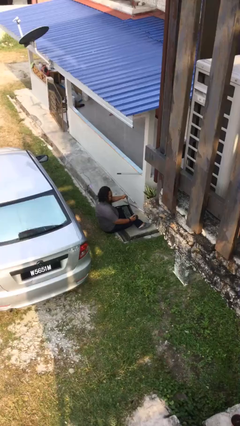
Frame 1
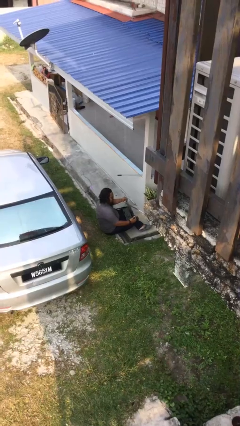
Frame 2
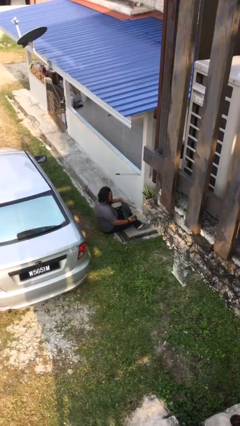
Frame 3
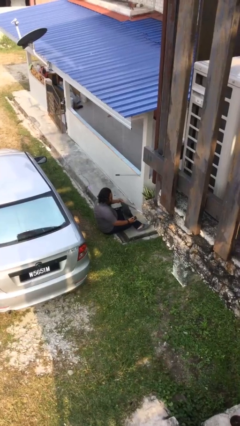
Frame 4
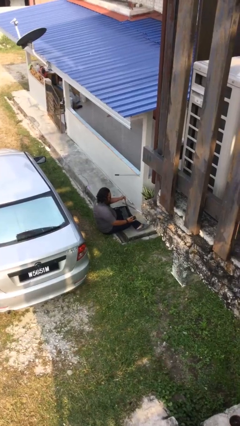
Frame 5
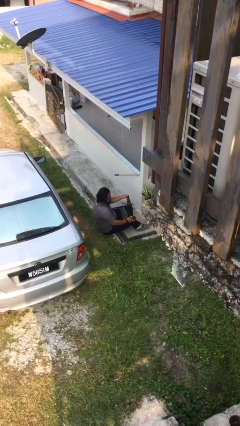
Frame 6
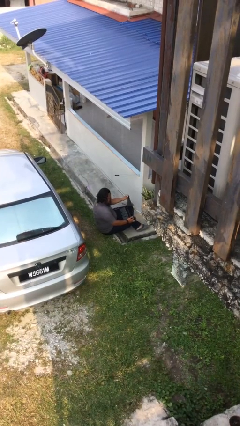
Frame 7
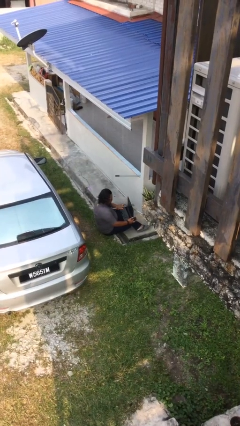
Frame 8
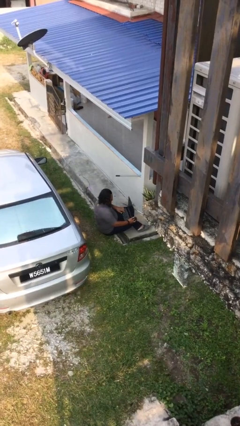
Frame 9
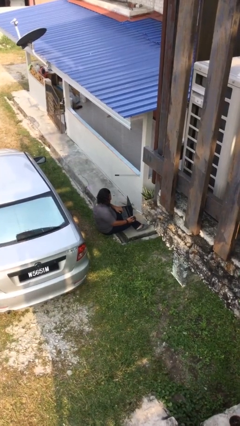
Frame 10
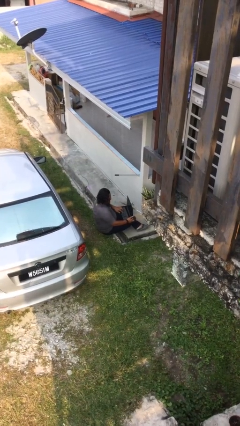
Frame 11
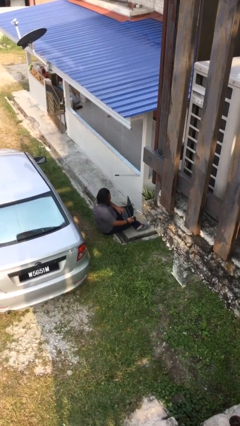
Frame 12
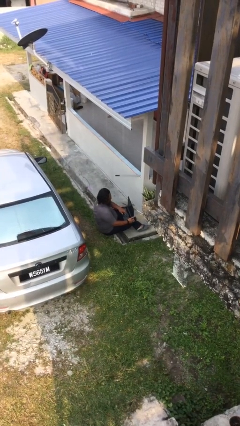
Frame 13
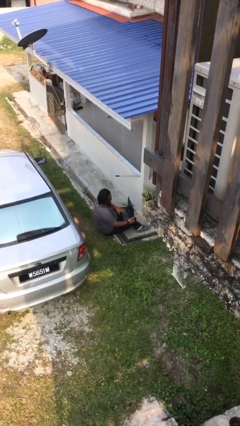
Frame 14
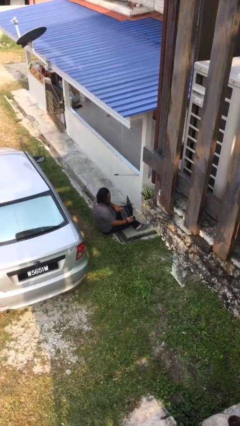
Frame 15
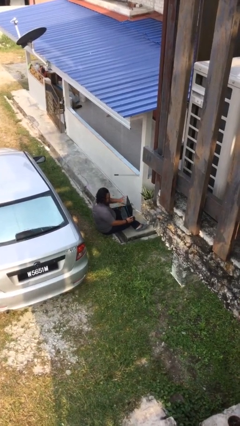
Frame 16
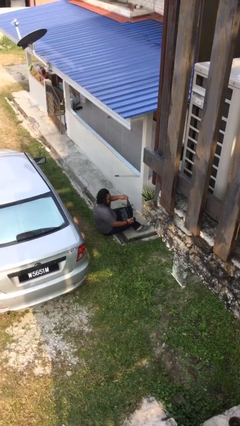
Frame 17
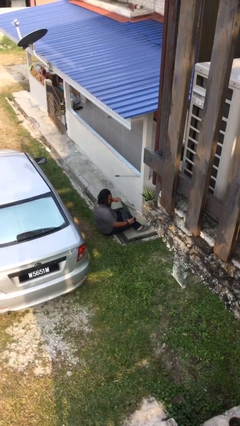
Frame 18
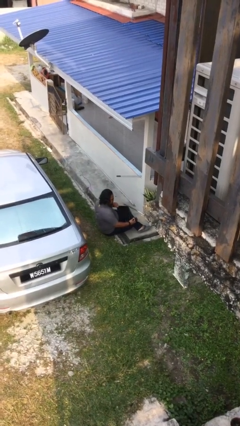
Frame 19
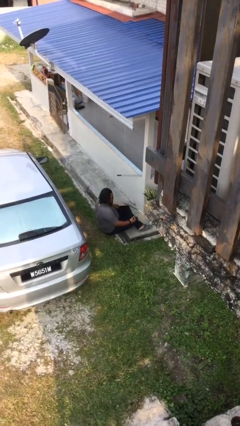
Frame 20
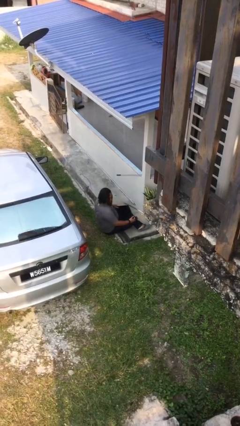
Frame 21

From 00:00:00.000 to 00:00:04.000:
person interacts with laptop

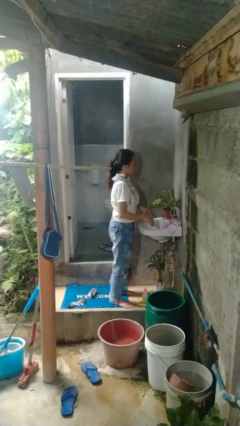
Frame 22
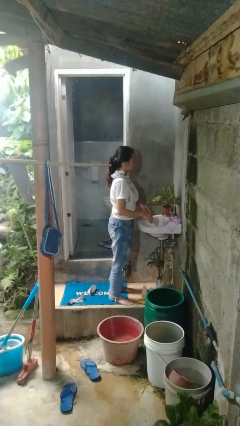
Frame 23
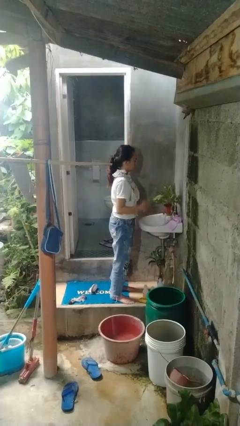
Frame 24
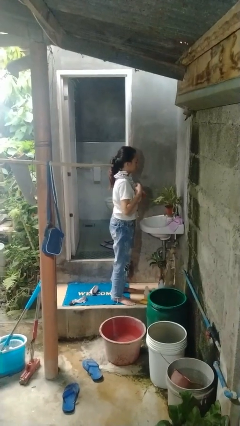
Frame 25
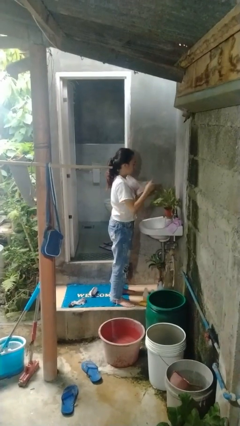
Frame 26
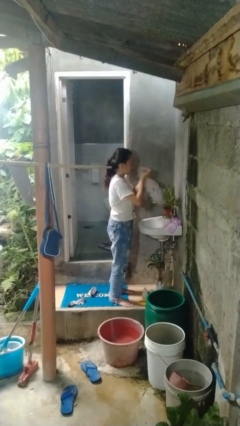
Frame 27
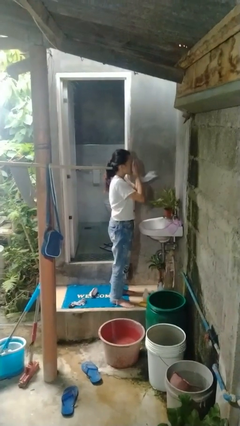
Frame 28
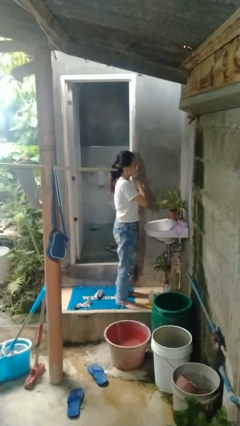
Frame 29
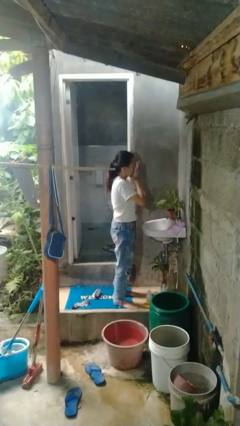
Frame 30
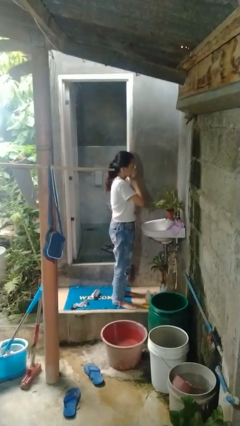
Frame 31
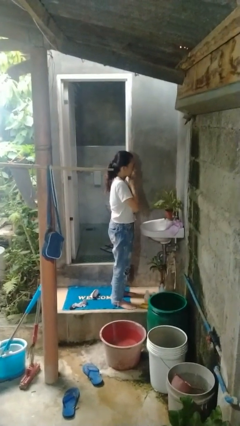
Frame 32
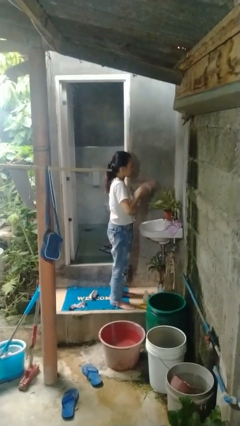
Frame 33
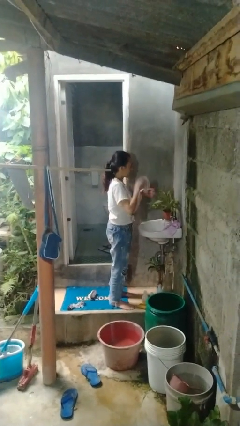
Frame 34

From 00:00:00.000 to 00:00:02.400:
person dries face with towel

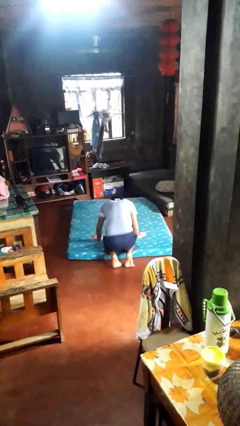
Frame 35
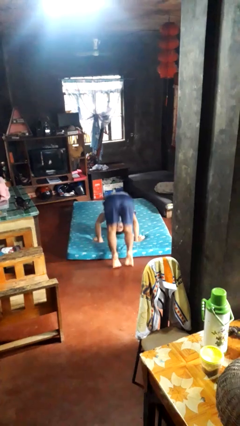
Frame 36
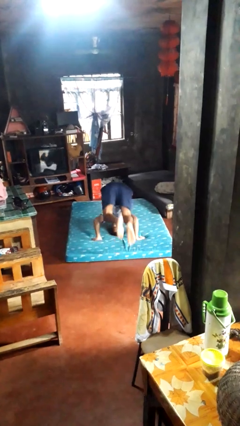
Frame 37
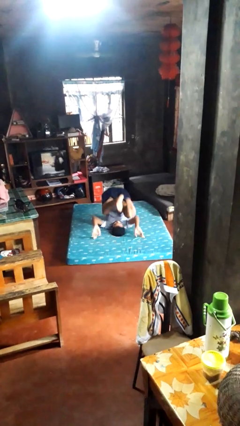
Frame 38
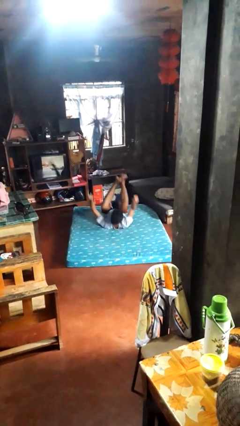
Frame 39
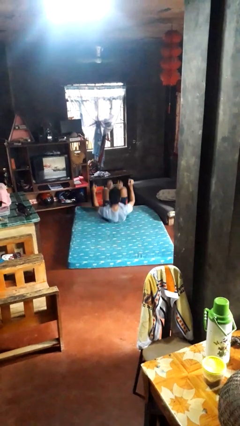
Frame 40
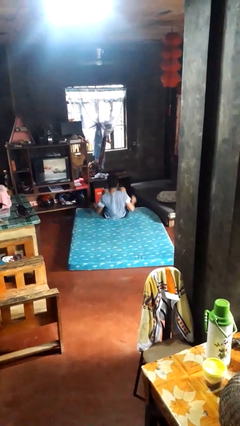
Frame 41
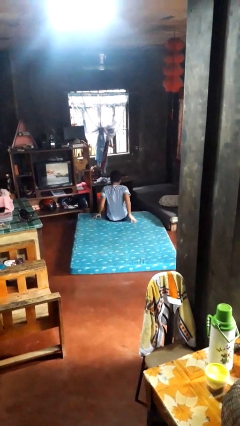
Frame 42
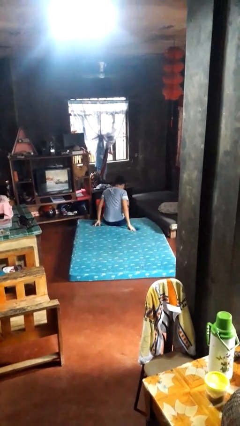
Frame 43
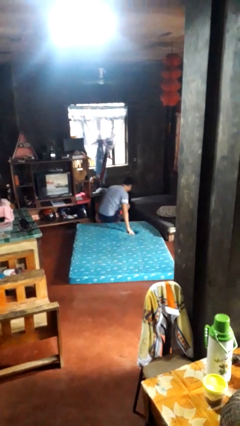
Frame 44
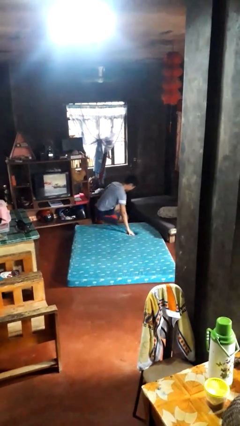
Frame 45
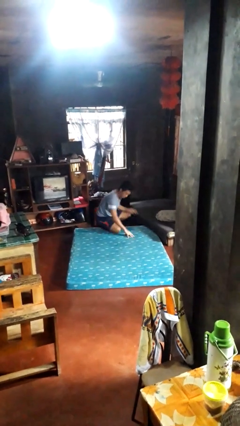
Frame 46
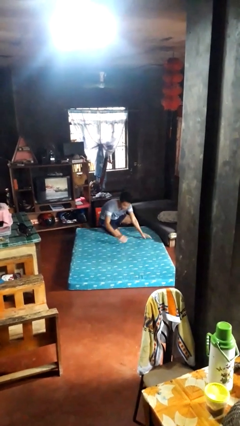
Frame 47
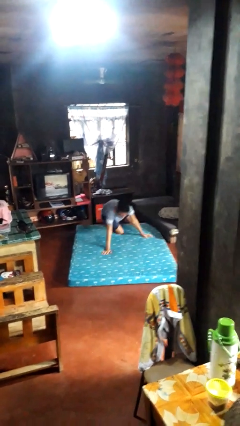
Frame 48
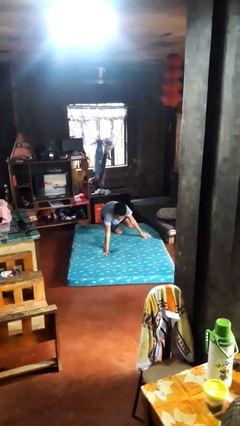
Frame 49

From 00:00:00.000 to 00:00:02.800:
person somersaults

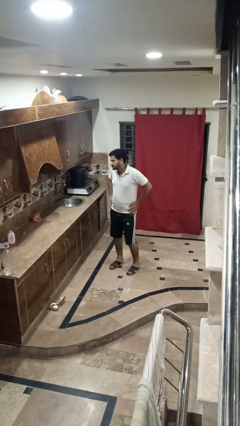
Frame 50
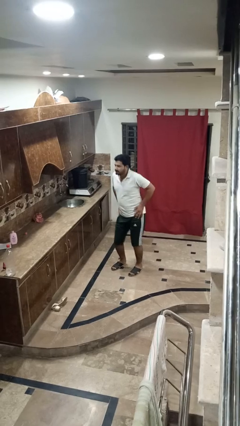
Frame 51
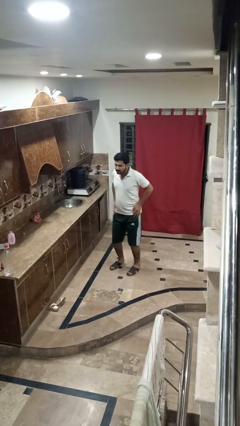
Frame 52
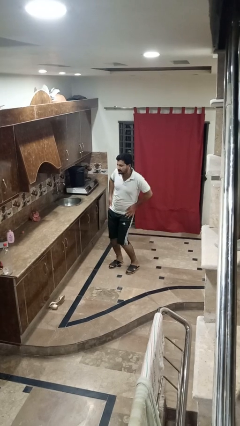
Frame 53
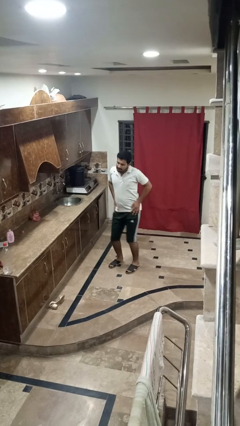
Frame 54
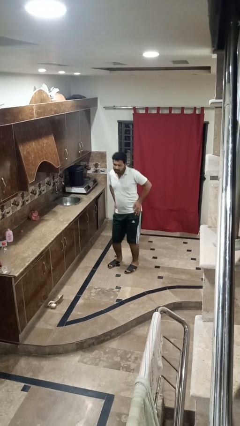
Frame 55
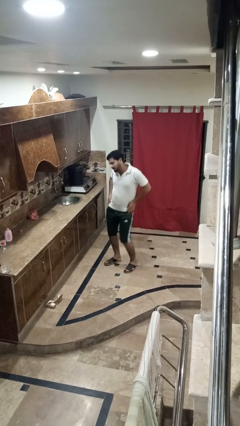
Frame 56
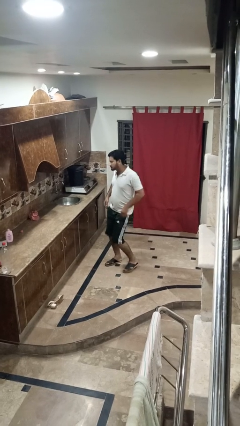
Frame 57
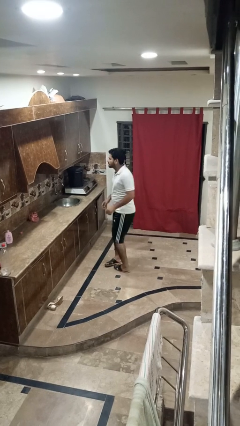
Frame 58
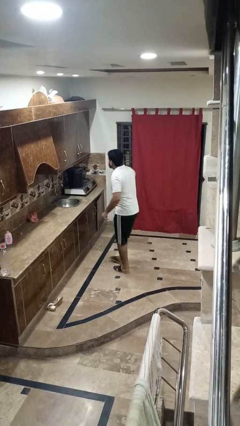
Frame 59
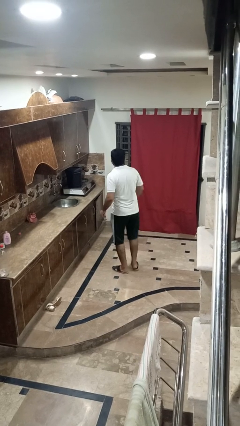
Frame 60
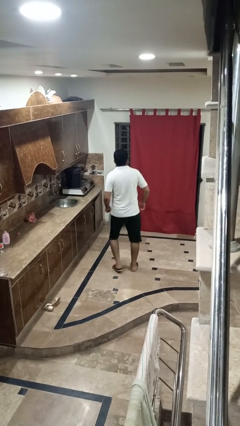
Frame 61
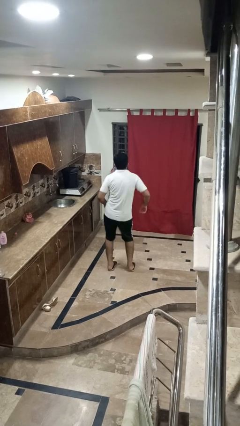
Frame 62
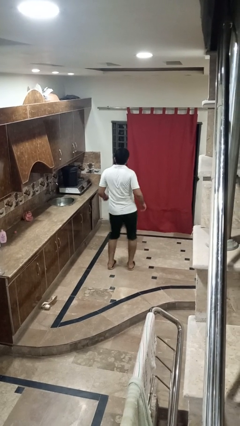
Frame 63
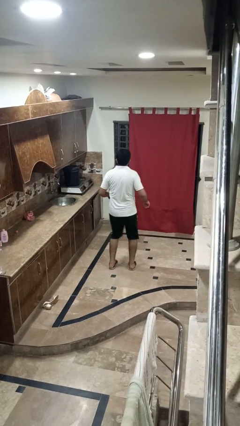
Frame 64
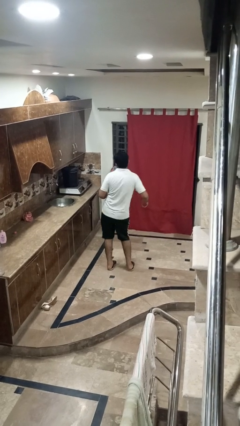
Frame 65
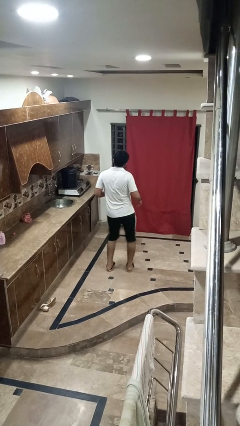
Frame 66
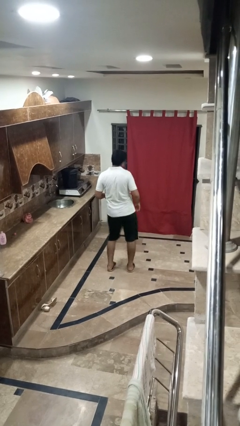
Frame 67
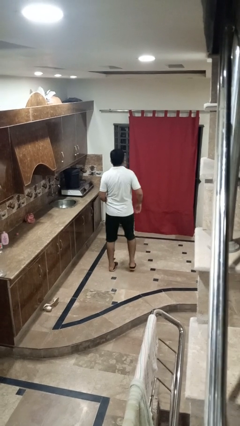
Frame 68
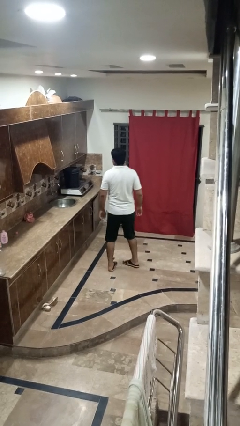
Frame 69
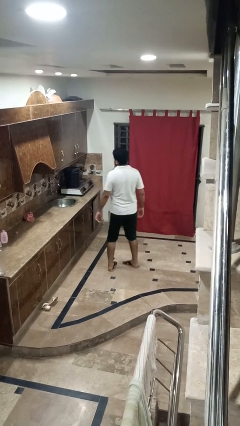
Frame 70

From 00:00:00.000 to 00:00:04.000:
person wiggles hips

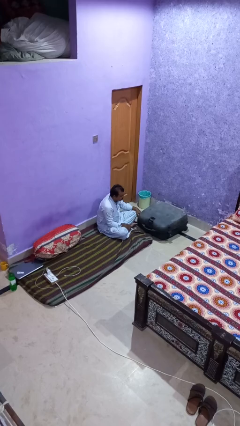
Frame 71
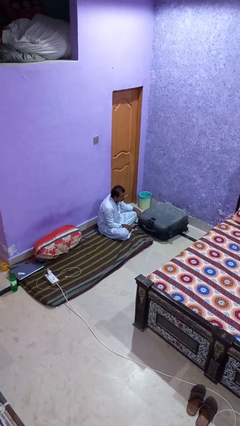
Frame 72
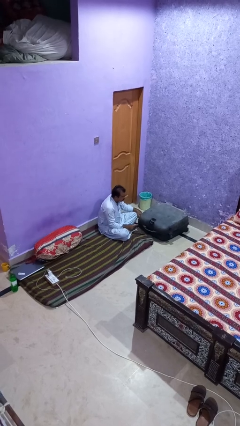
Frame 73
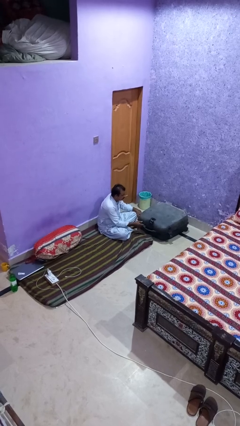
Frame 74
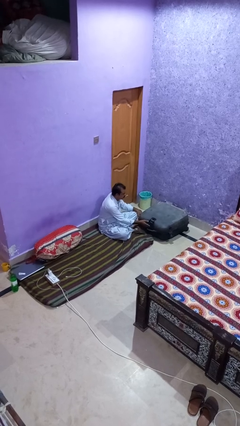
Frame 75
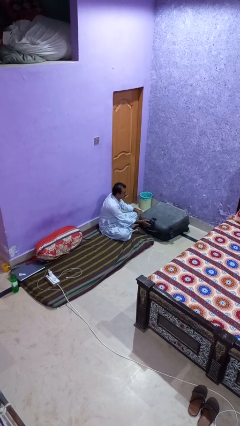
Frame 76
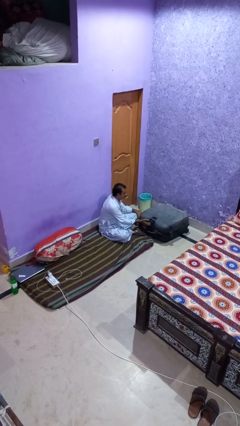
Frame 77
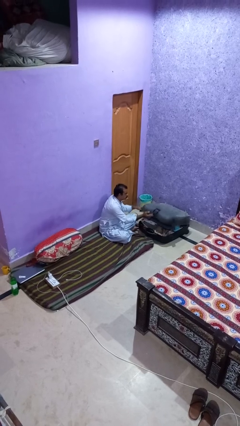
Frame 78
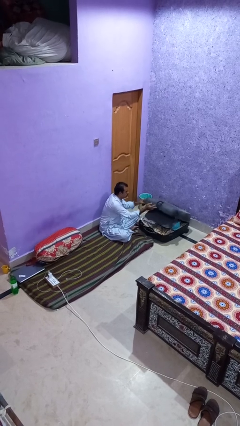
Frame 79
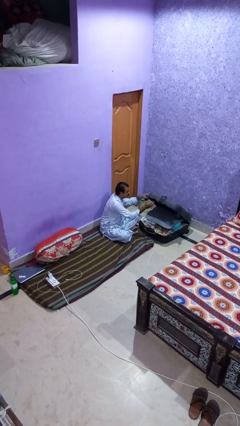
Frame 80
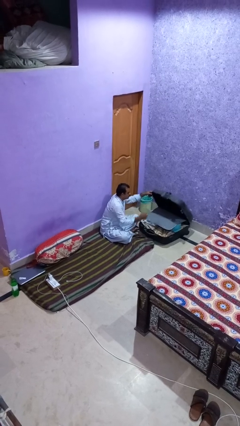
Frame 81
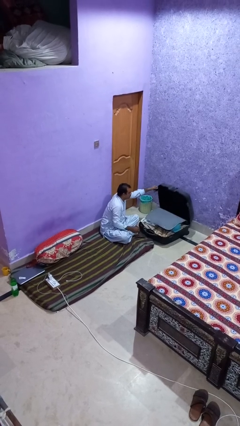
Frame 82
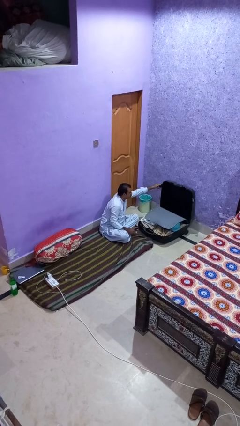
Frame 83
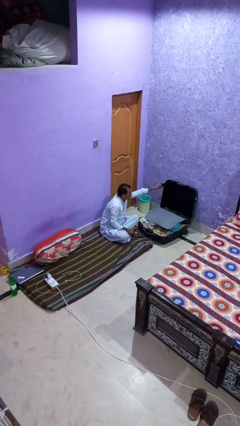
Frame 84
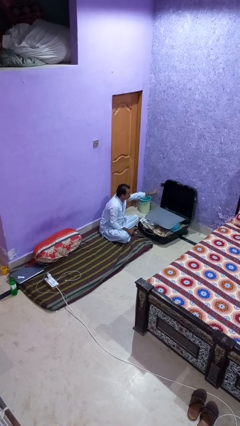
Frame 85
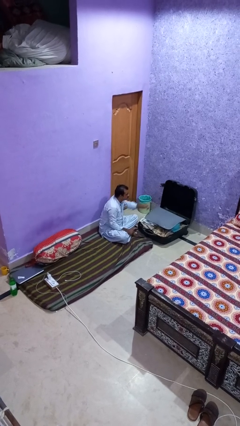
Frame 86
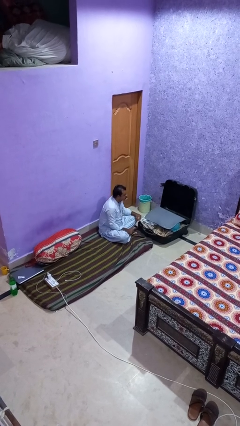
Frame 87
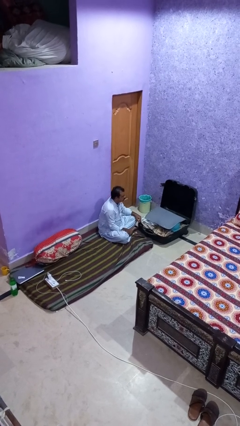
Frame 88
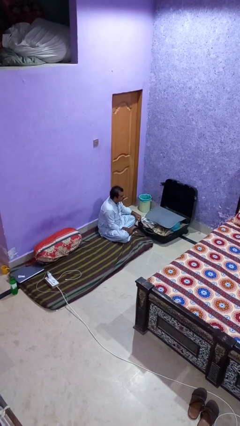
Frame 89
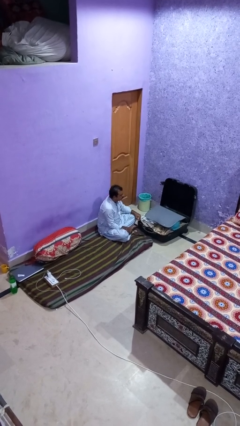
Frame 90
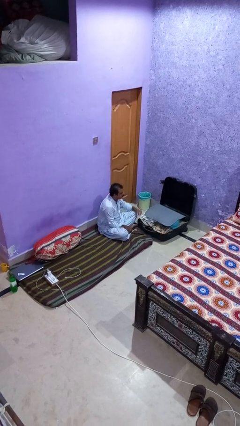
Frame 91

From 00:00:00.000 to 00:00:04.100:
person opens suitcase
